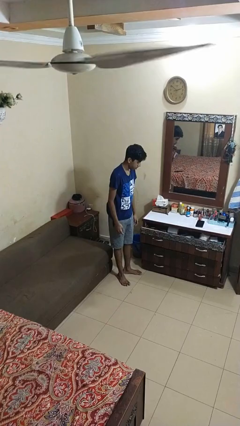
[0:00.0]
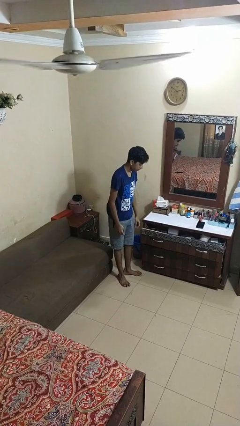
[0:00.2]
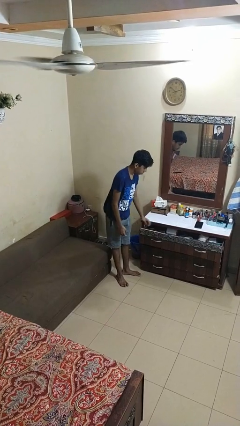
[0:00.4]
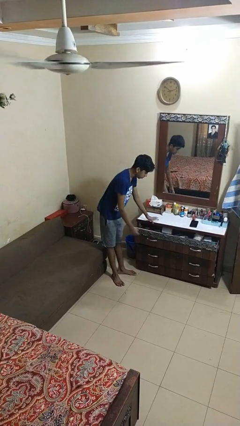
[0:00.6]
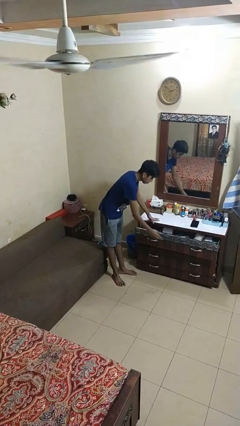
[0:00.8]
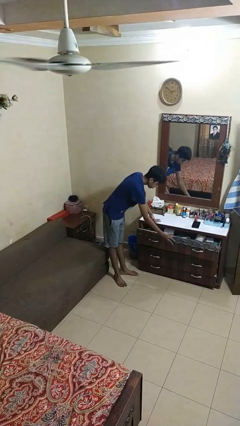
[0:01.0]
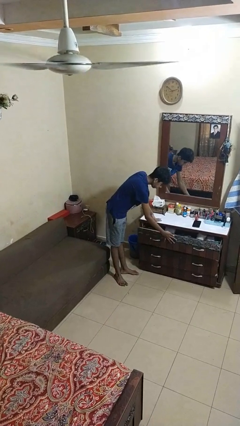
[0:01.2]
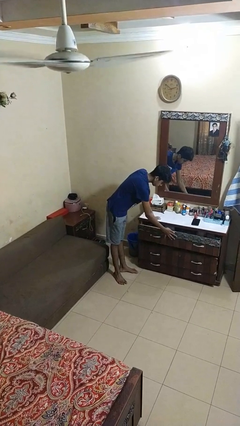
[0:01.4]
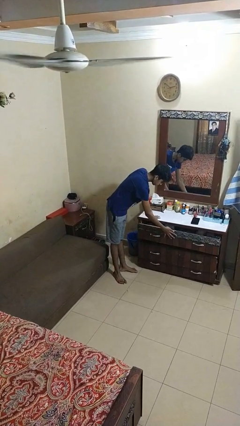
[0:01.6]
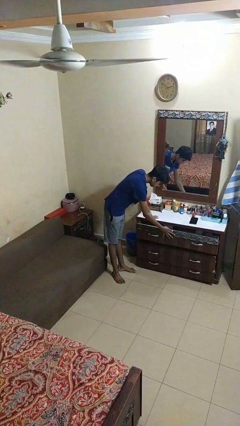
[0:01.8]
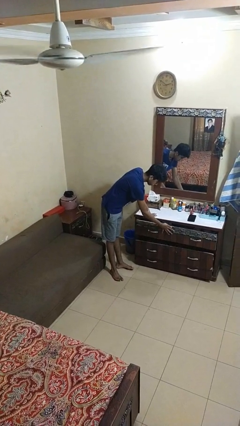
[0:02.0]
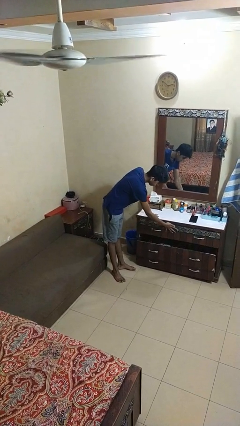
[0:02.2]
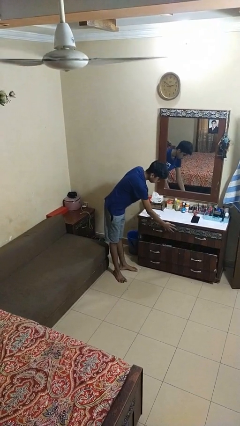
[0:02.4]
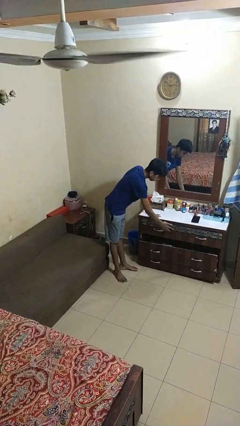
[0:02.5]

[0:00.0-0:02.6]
person closes dresser drawer

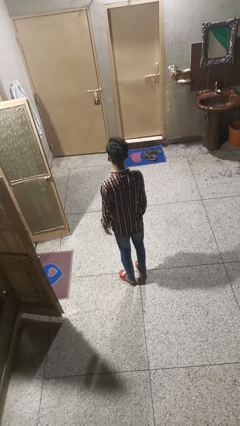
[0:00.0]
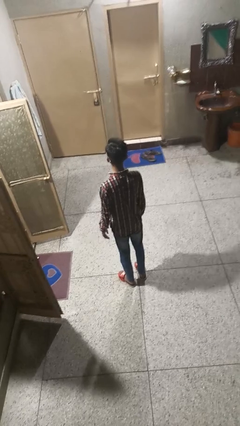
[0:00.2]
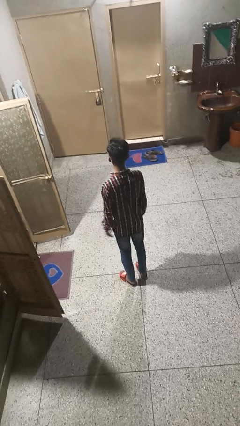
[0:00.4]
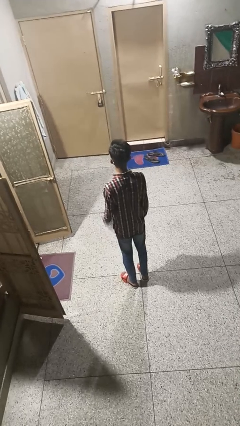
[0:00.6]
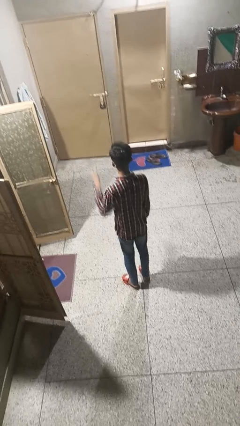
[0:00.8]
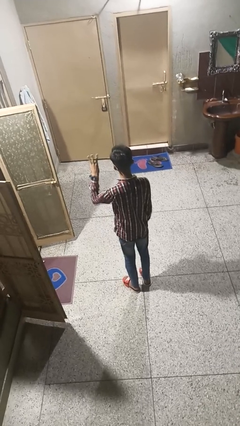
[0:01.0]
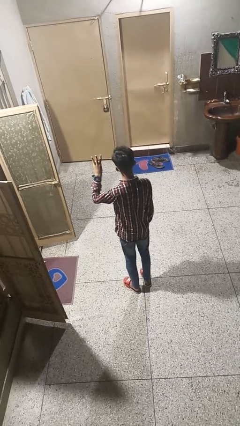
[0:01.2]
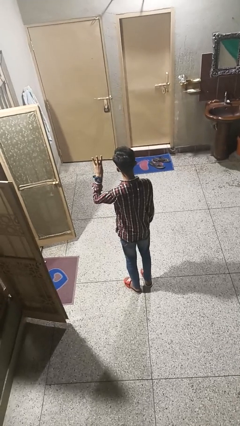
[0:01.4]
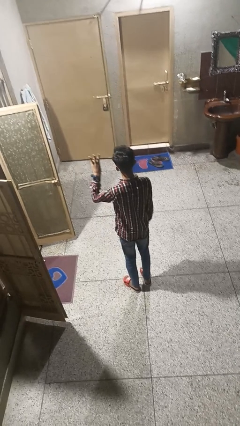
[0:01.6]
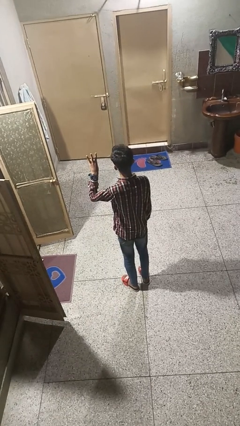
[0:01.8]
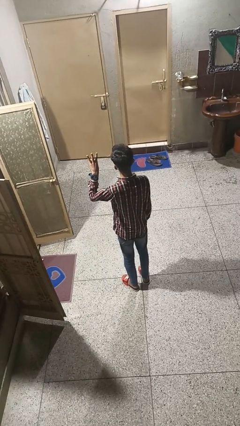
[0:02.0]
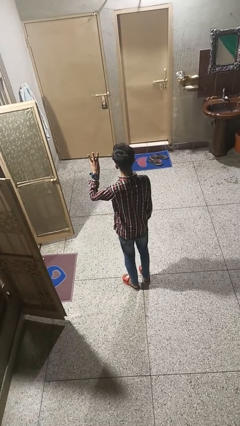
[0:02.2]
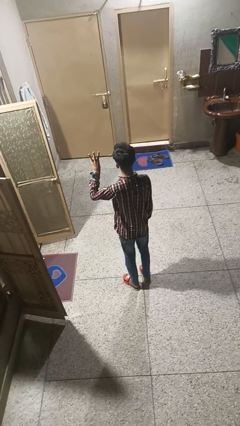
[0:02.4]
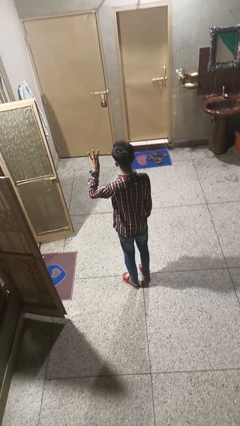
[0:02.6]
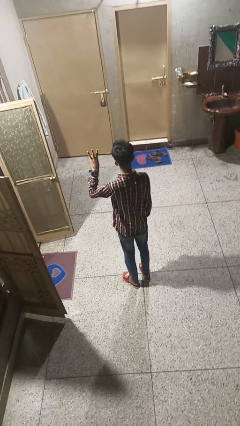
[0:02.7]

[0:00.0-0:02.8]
person gestures number three

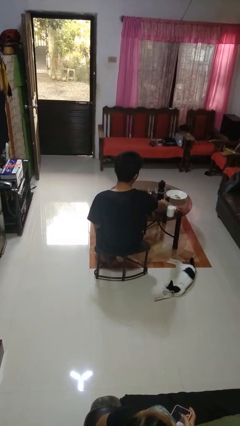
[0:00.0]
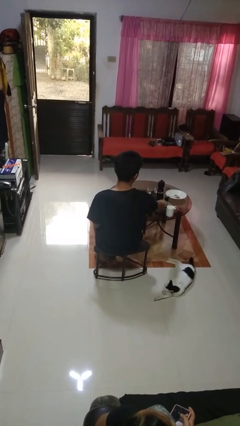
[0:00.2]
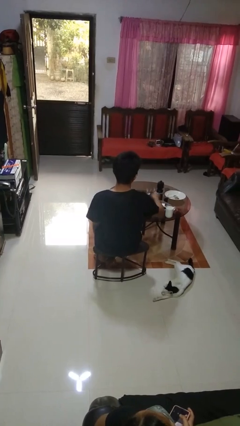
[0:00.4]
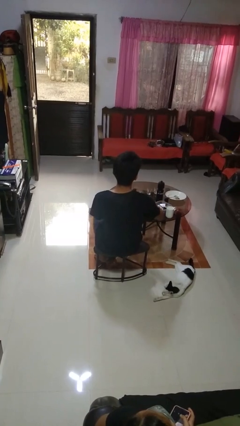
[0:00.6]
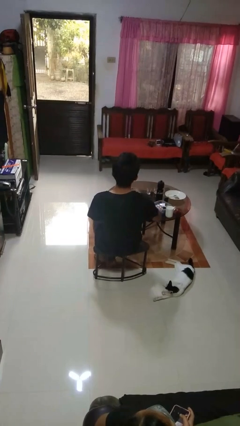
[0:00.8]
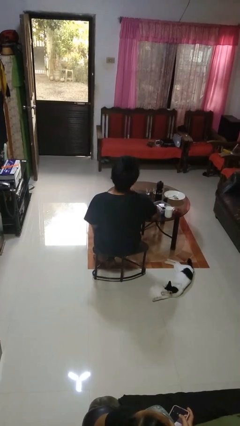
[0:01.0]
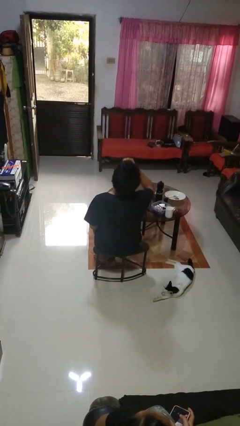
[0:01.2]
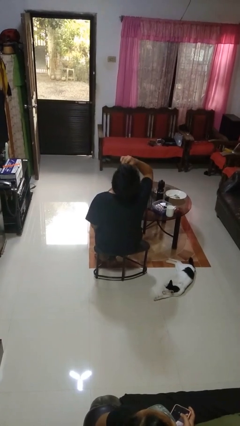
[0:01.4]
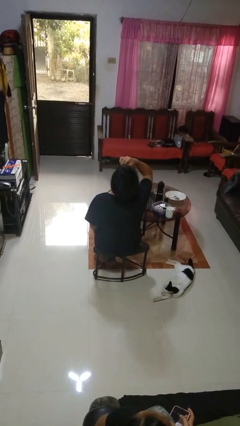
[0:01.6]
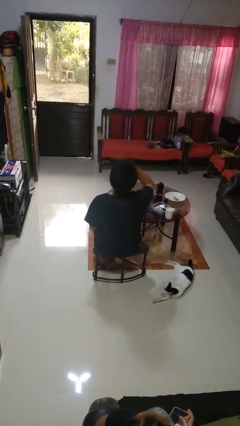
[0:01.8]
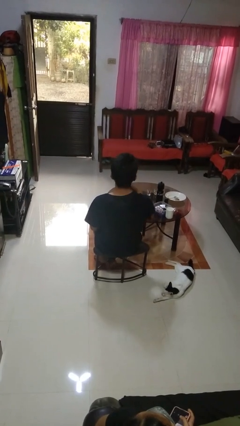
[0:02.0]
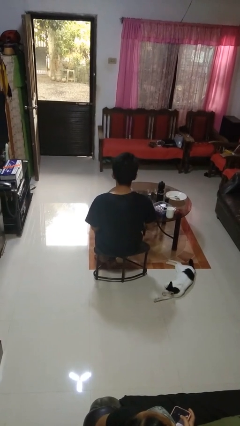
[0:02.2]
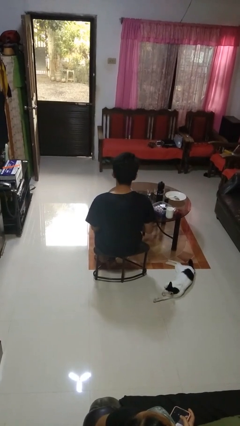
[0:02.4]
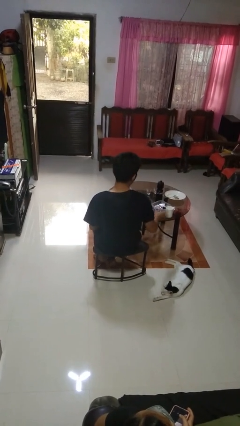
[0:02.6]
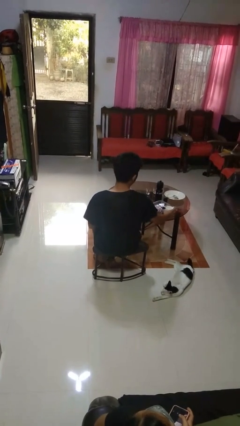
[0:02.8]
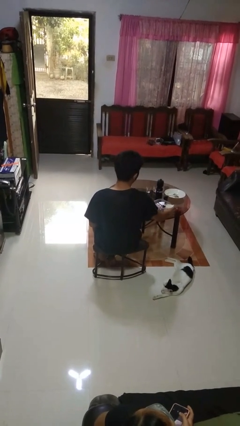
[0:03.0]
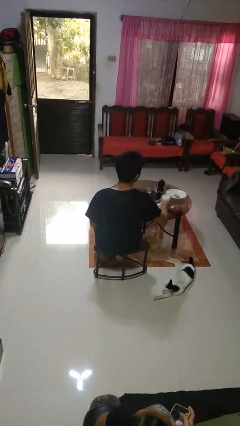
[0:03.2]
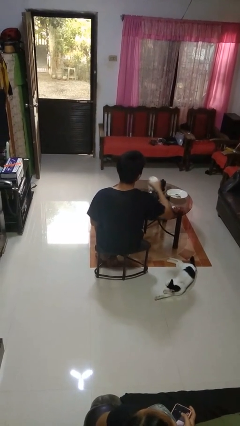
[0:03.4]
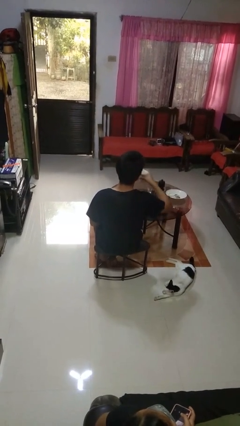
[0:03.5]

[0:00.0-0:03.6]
person takes medicine pills

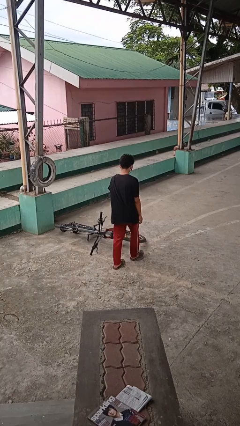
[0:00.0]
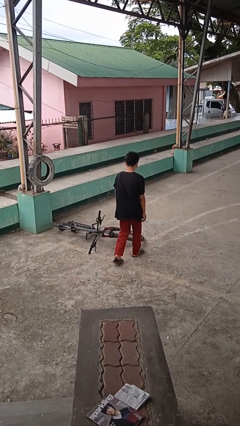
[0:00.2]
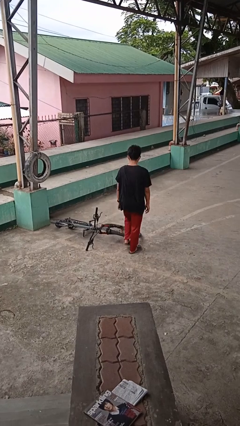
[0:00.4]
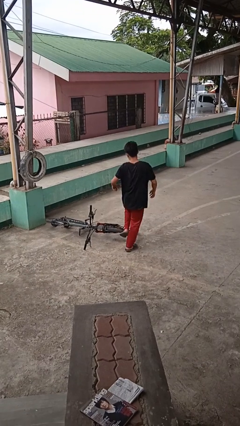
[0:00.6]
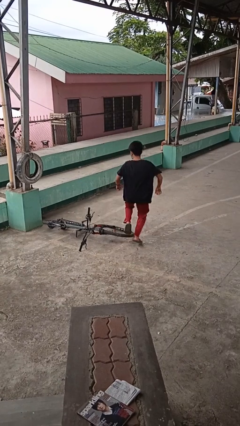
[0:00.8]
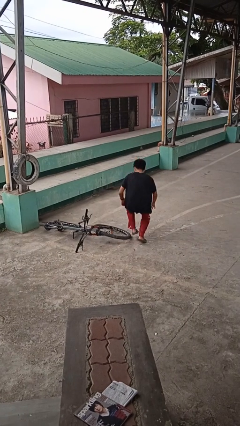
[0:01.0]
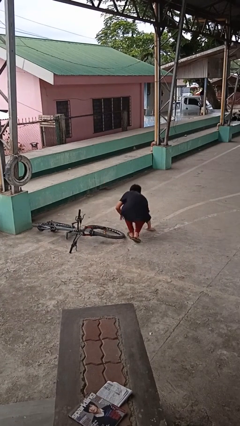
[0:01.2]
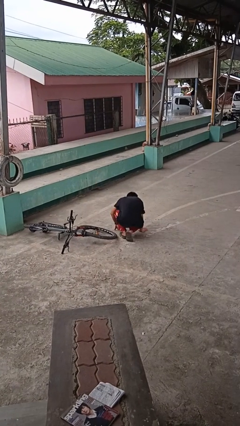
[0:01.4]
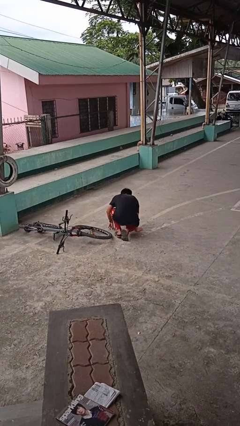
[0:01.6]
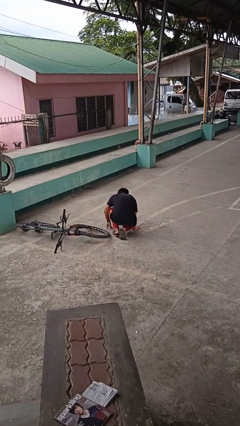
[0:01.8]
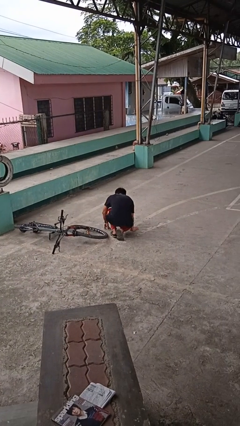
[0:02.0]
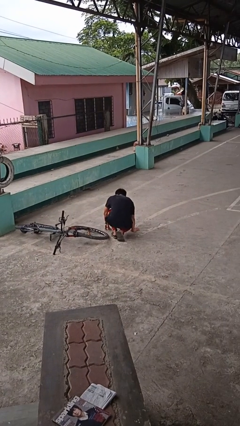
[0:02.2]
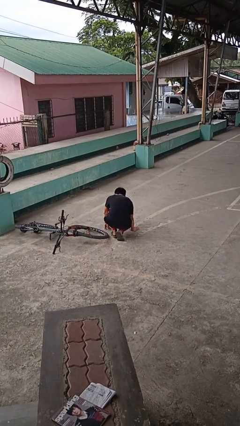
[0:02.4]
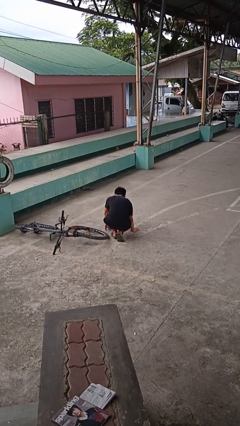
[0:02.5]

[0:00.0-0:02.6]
person trips on object on floor

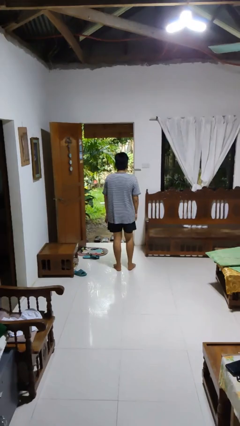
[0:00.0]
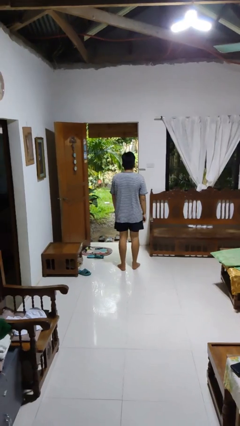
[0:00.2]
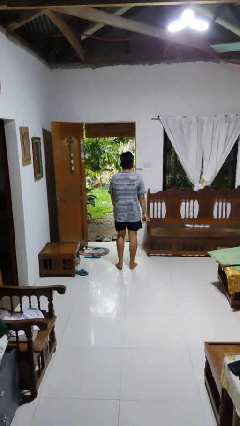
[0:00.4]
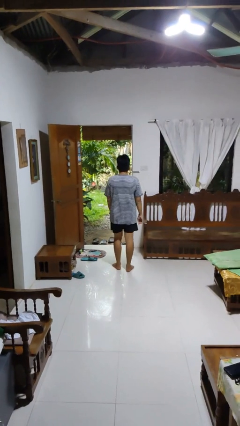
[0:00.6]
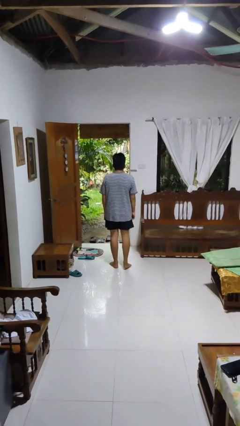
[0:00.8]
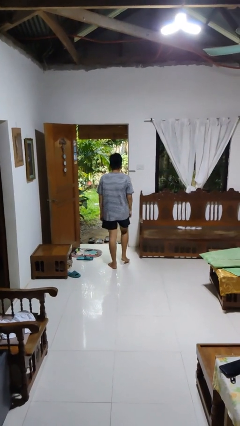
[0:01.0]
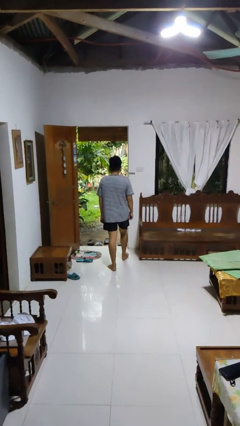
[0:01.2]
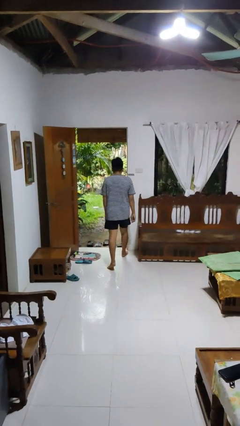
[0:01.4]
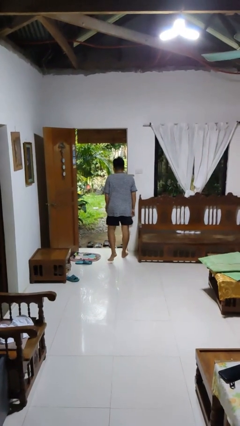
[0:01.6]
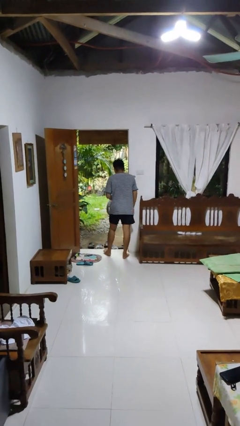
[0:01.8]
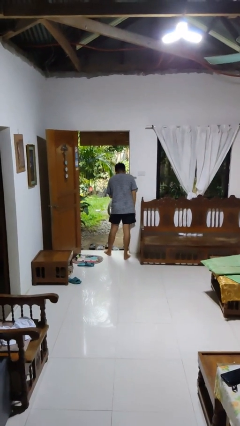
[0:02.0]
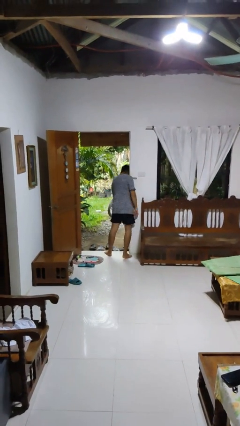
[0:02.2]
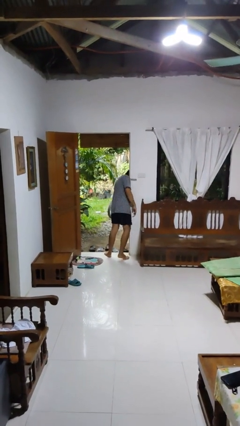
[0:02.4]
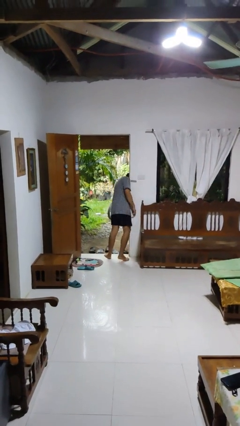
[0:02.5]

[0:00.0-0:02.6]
person bumps into wall

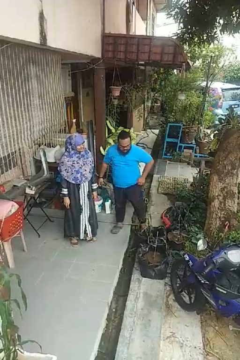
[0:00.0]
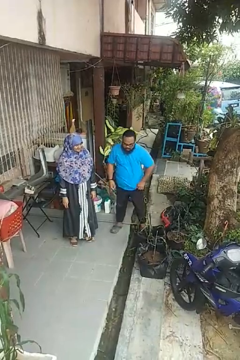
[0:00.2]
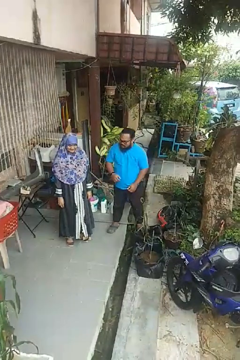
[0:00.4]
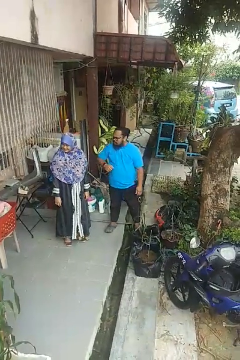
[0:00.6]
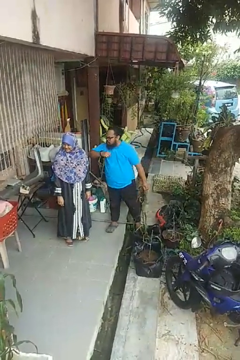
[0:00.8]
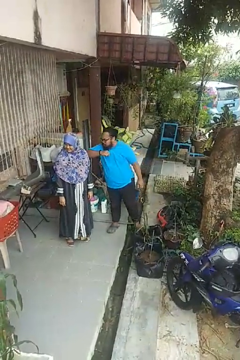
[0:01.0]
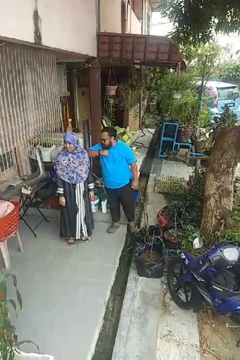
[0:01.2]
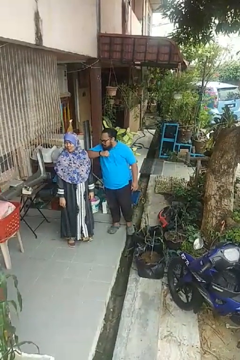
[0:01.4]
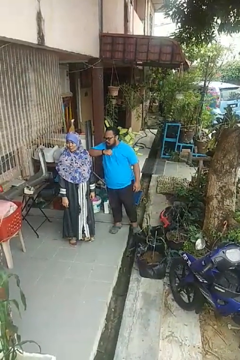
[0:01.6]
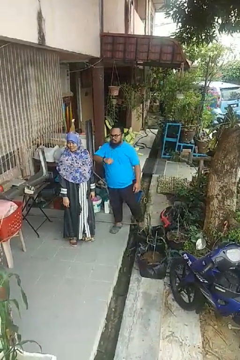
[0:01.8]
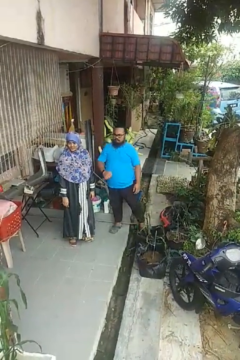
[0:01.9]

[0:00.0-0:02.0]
person nudges person with elbow

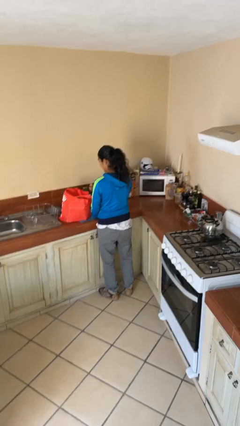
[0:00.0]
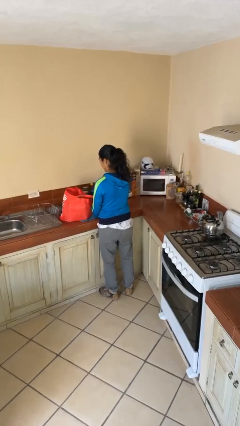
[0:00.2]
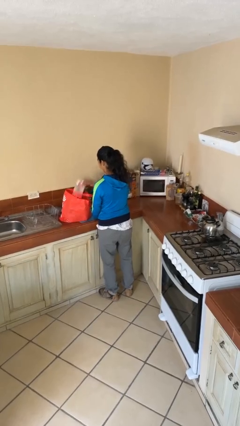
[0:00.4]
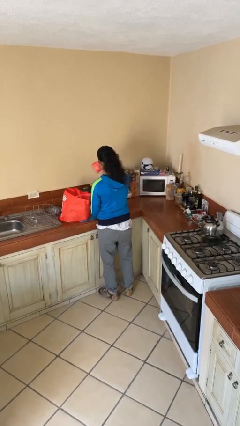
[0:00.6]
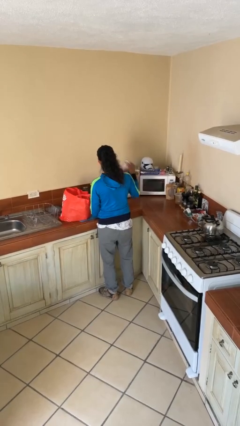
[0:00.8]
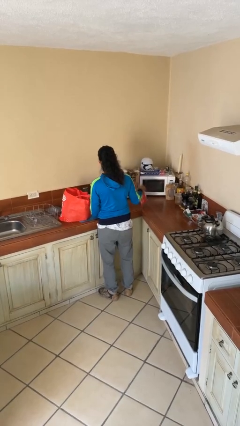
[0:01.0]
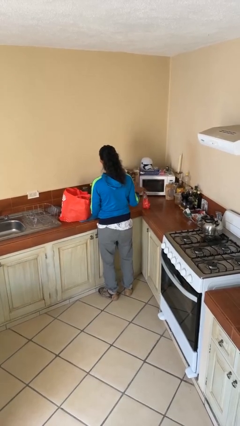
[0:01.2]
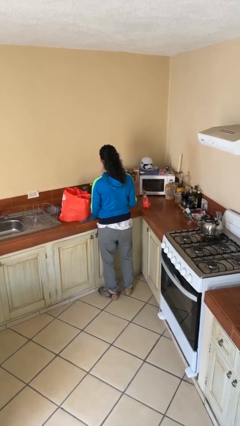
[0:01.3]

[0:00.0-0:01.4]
person takes object from bag
